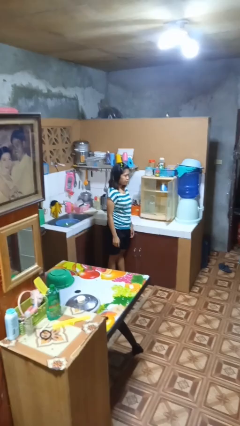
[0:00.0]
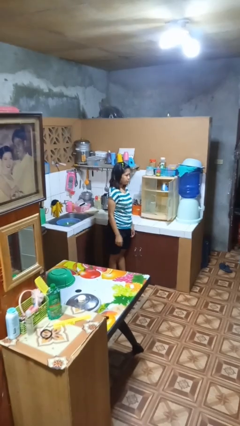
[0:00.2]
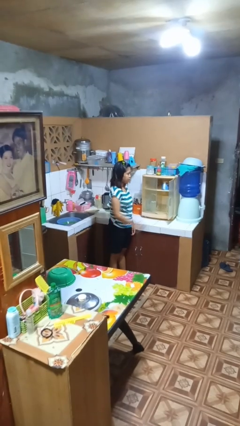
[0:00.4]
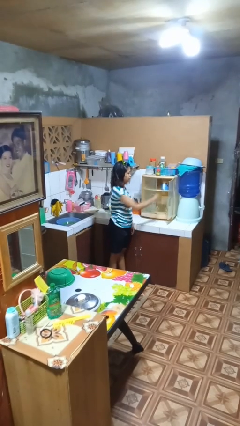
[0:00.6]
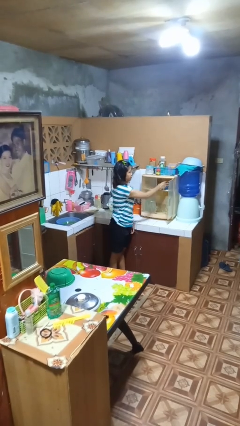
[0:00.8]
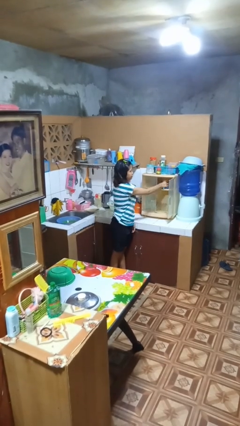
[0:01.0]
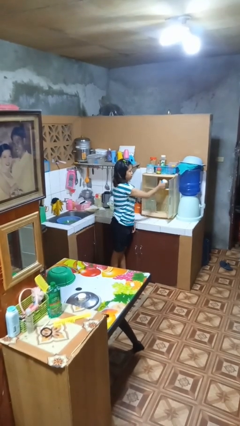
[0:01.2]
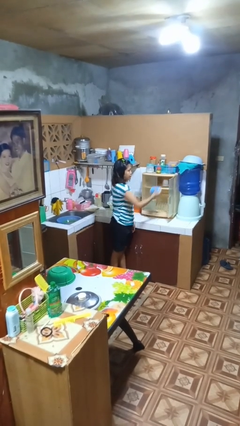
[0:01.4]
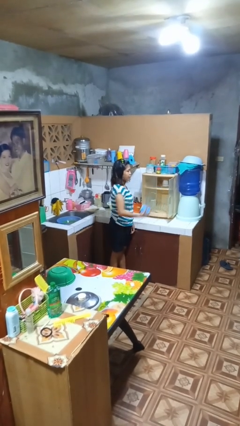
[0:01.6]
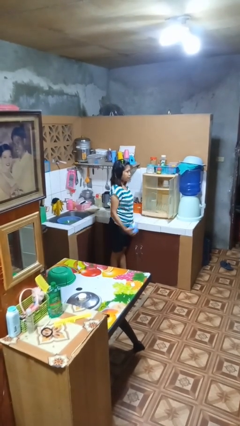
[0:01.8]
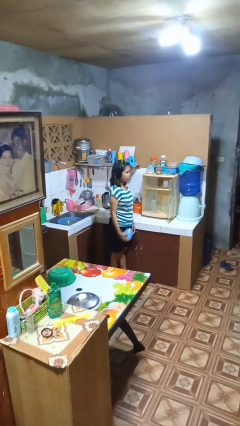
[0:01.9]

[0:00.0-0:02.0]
person takes object from cabinet

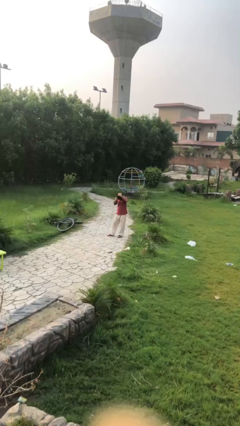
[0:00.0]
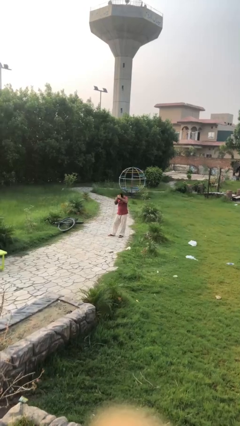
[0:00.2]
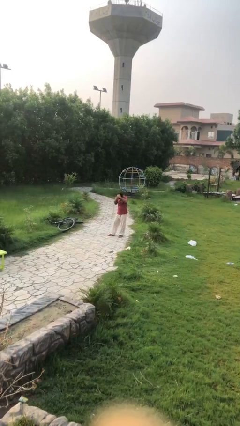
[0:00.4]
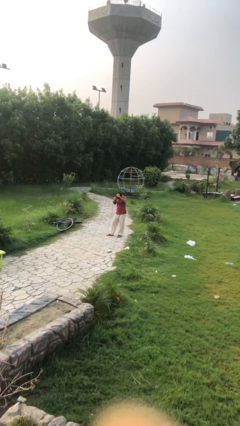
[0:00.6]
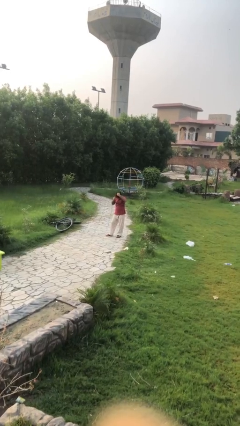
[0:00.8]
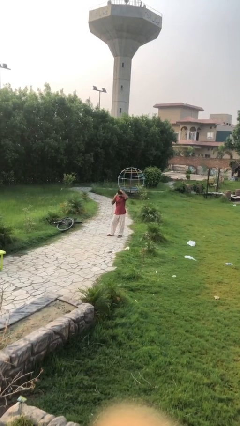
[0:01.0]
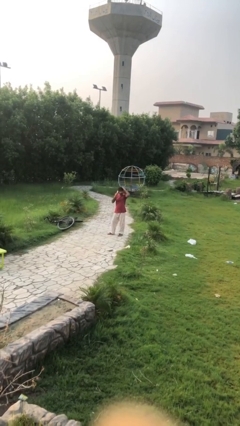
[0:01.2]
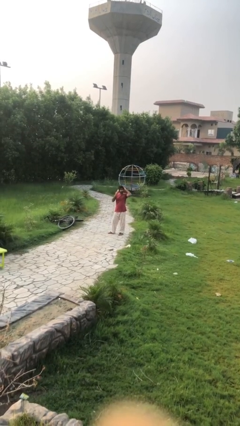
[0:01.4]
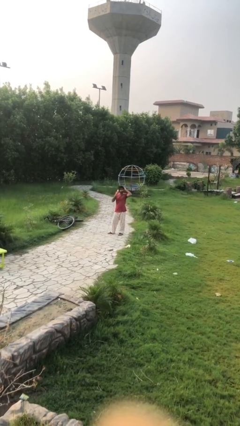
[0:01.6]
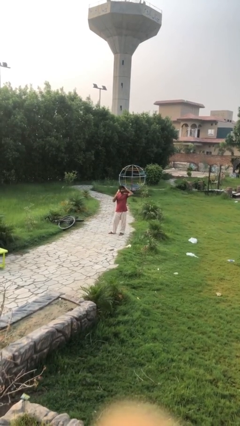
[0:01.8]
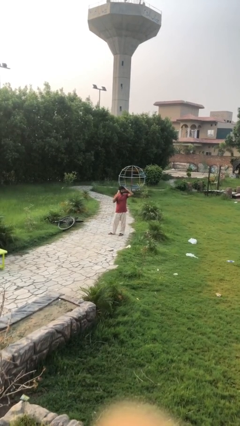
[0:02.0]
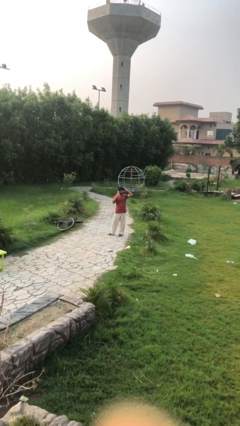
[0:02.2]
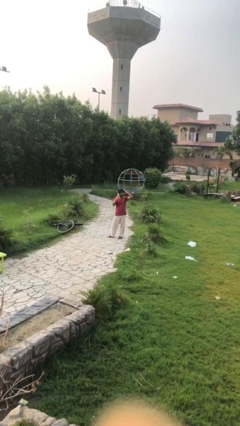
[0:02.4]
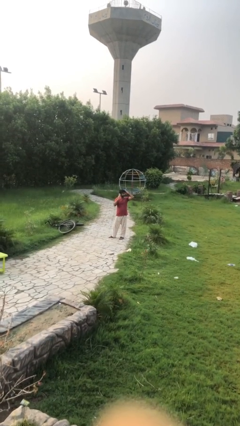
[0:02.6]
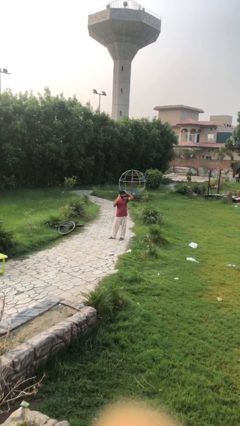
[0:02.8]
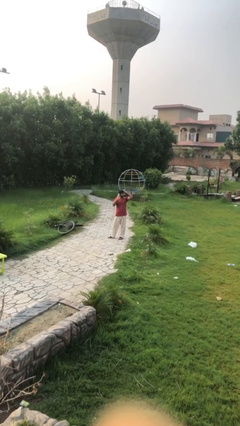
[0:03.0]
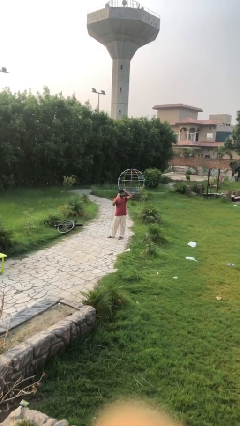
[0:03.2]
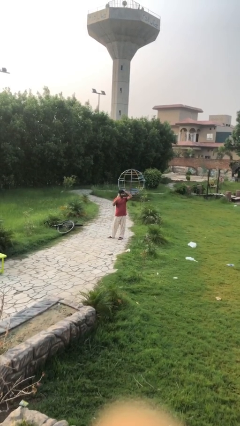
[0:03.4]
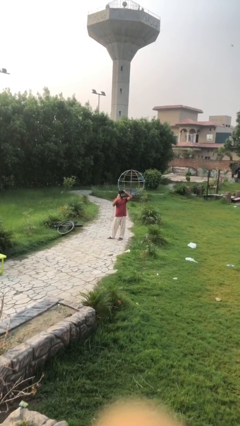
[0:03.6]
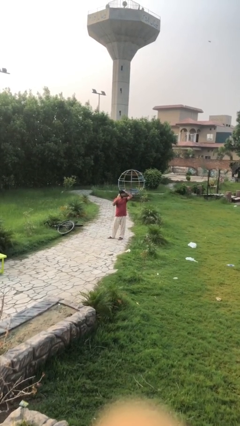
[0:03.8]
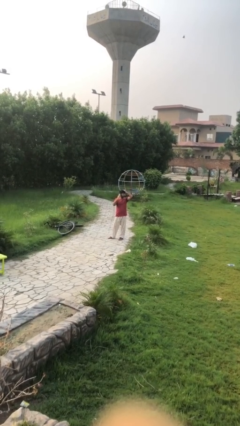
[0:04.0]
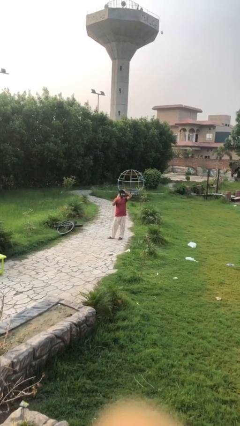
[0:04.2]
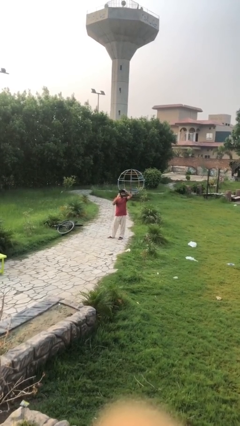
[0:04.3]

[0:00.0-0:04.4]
person talks on phone

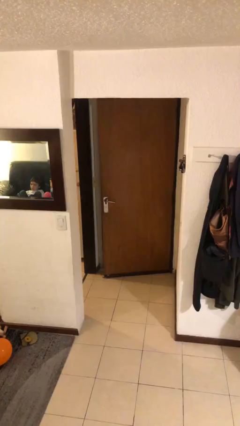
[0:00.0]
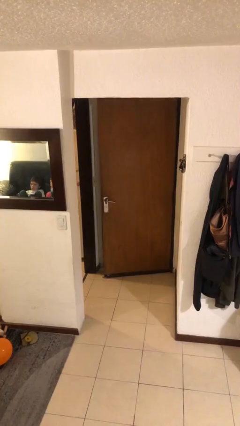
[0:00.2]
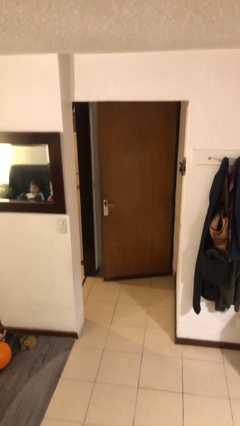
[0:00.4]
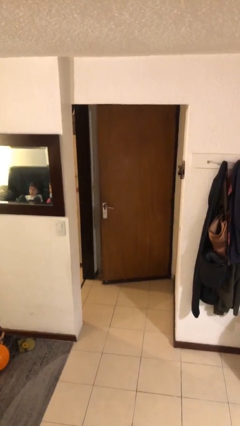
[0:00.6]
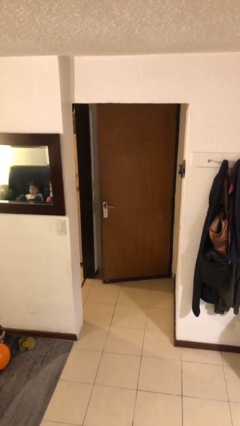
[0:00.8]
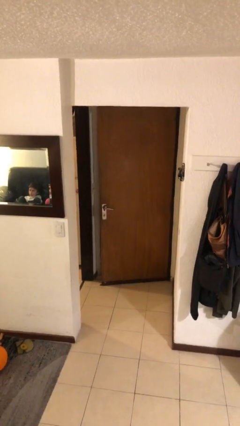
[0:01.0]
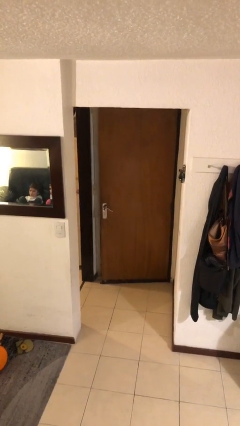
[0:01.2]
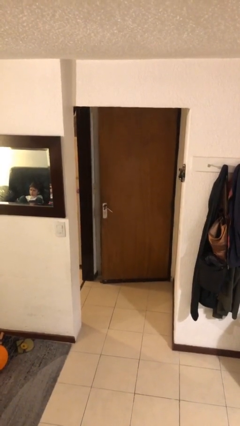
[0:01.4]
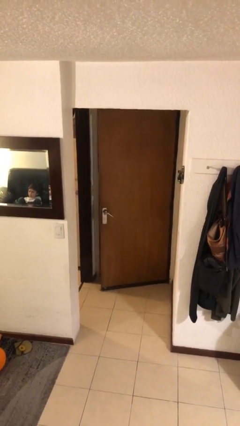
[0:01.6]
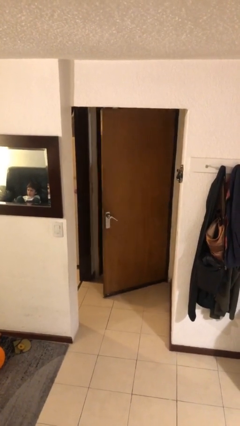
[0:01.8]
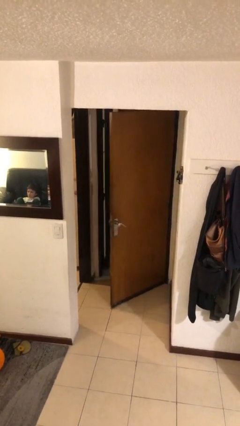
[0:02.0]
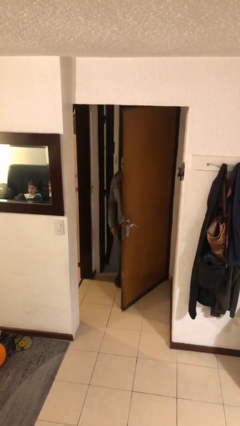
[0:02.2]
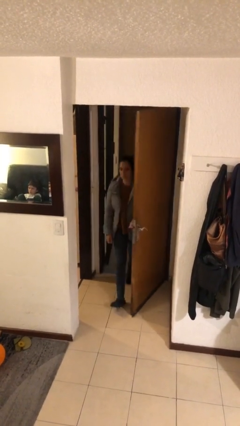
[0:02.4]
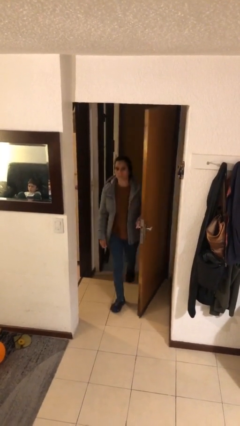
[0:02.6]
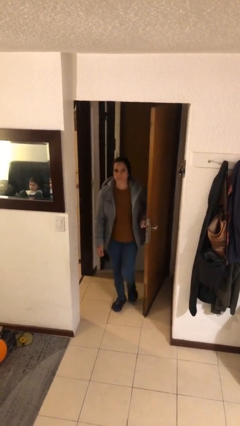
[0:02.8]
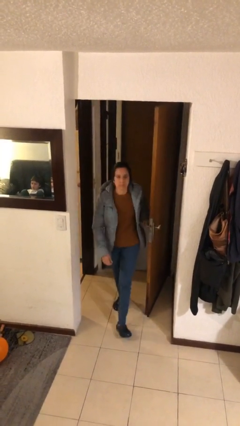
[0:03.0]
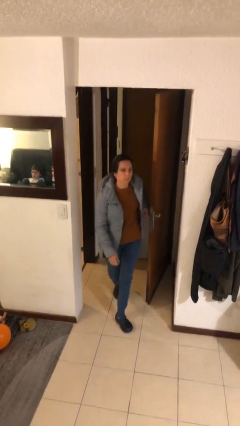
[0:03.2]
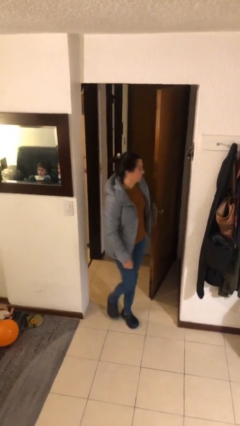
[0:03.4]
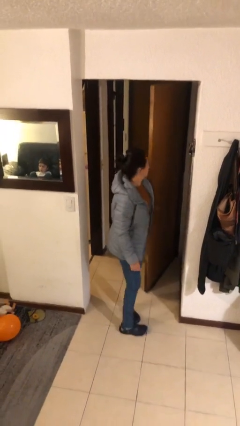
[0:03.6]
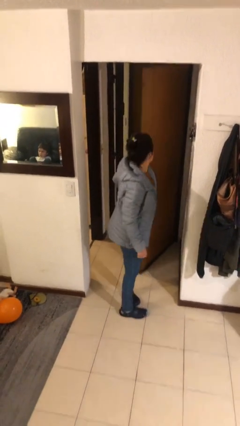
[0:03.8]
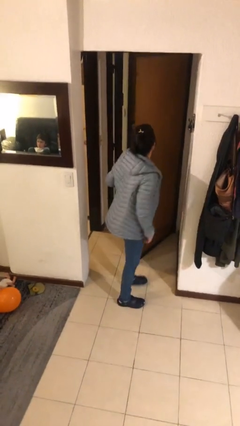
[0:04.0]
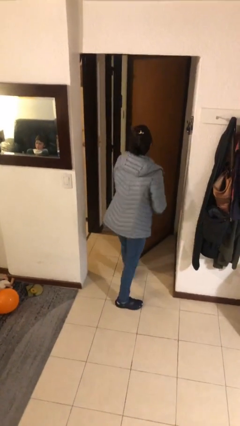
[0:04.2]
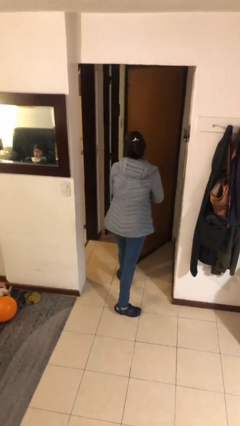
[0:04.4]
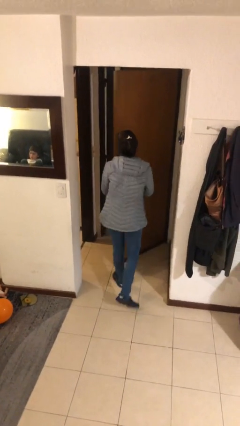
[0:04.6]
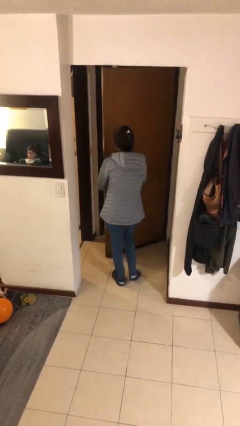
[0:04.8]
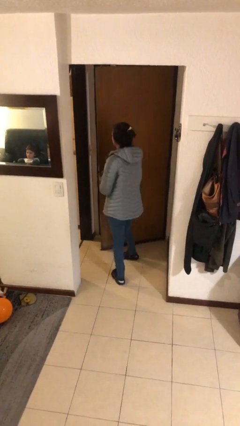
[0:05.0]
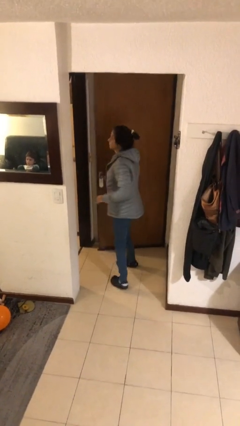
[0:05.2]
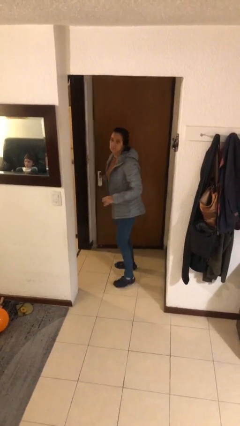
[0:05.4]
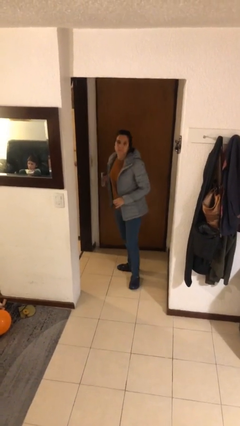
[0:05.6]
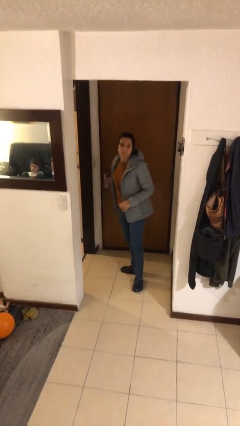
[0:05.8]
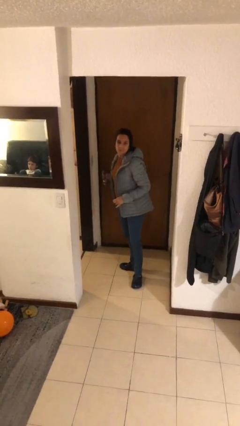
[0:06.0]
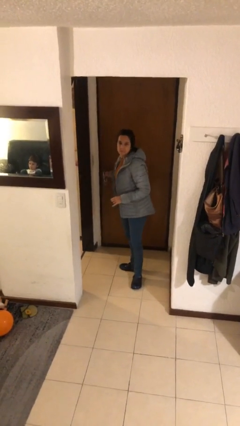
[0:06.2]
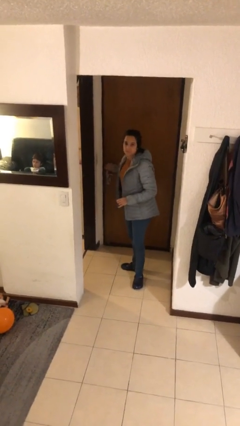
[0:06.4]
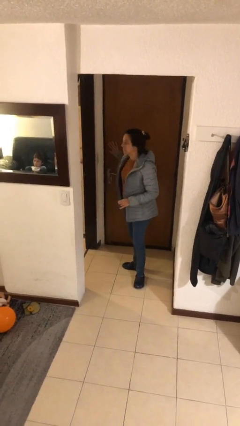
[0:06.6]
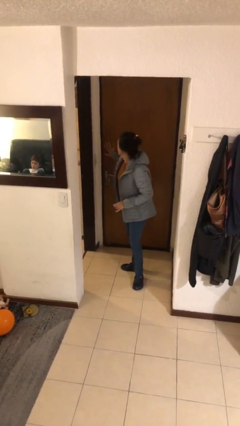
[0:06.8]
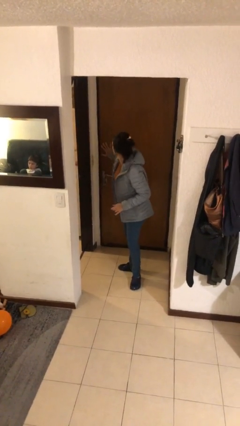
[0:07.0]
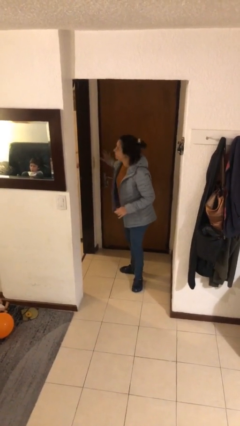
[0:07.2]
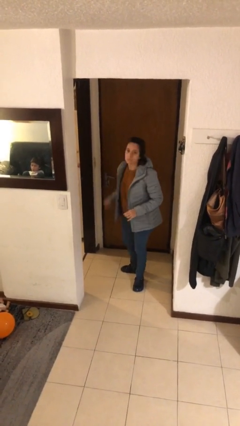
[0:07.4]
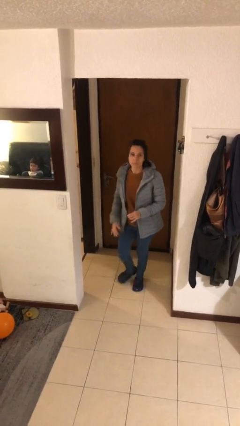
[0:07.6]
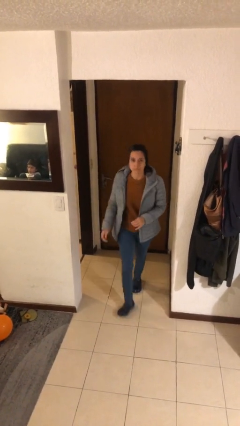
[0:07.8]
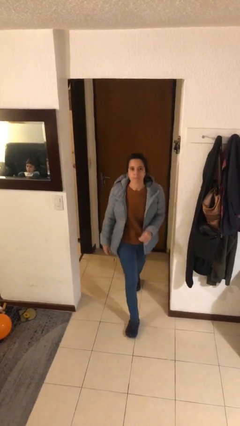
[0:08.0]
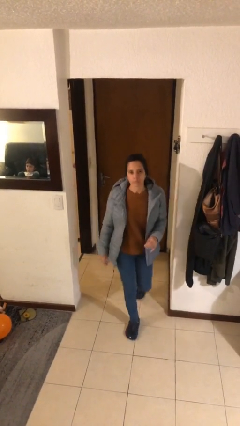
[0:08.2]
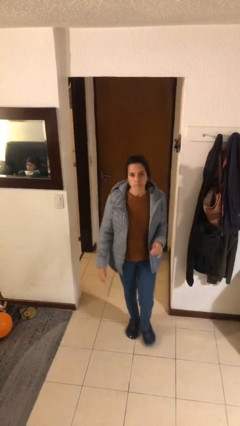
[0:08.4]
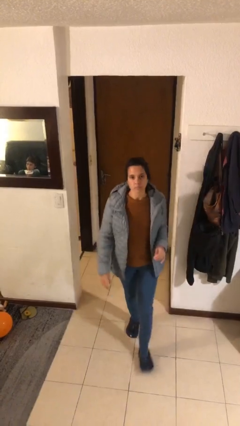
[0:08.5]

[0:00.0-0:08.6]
person enters scene through structure

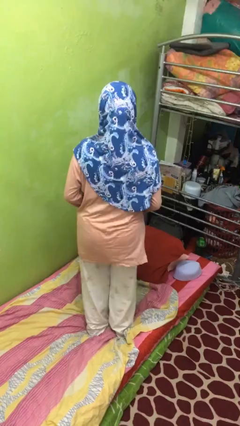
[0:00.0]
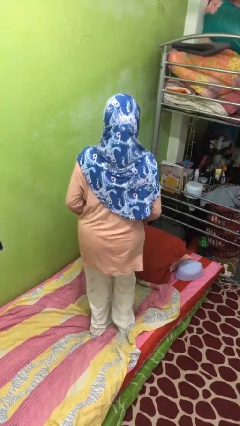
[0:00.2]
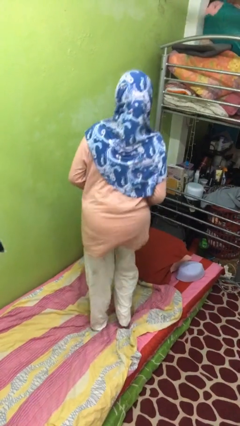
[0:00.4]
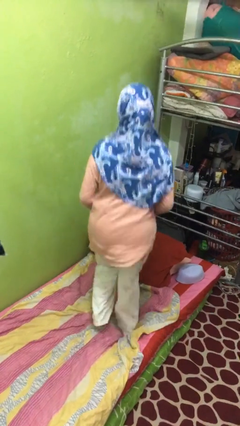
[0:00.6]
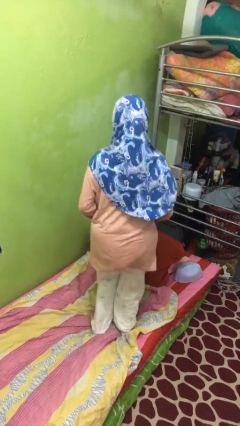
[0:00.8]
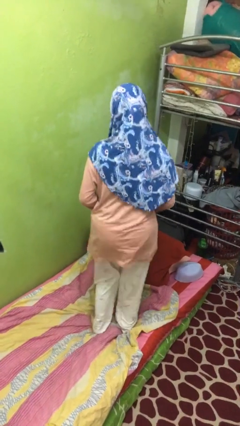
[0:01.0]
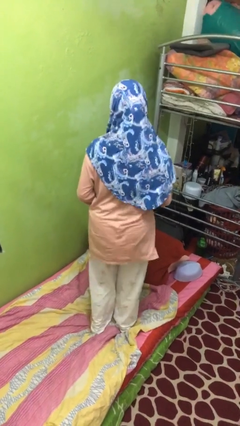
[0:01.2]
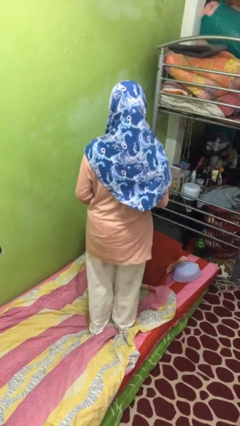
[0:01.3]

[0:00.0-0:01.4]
person jumps on bed

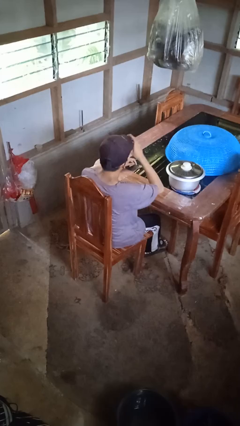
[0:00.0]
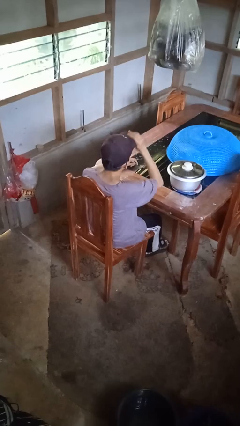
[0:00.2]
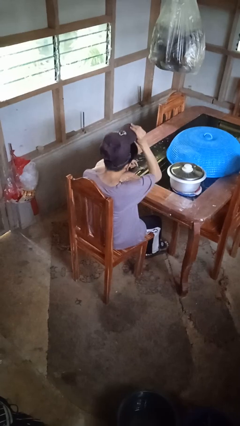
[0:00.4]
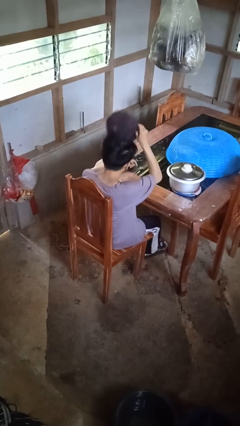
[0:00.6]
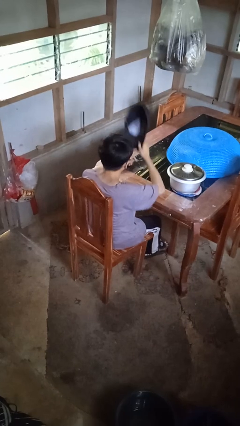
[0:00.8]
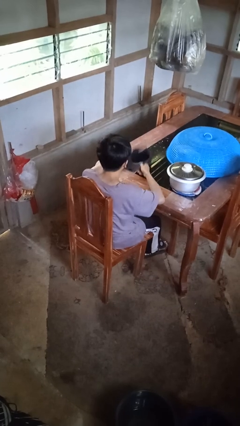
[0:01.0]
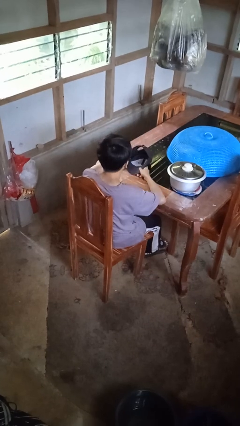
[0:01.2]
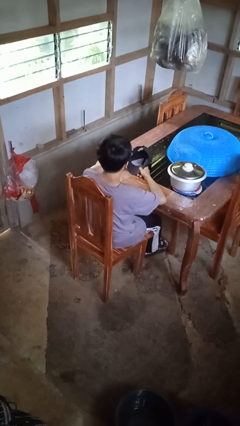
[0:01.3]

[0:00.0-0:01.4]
person takes off hat

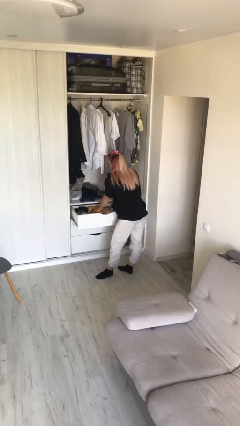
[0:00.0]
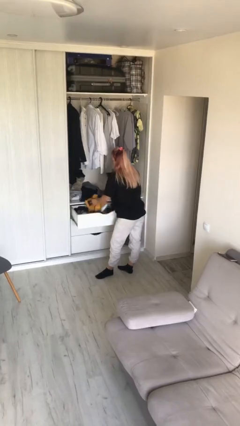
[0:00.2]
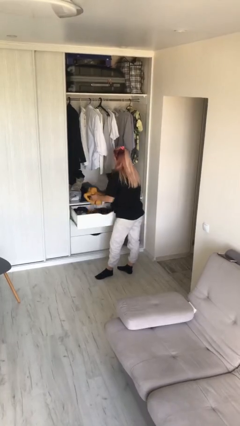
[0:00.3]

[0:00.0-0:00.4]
person takes clothes from dresser
